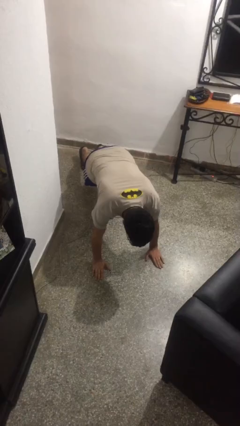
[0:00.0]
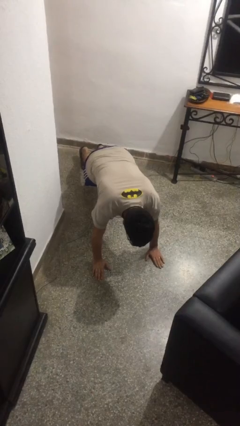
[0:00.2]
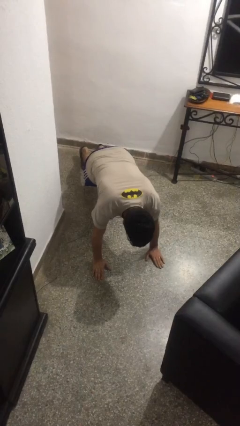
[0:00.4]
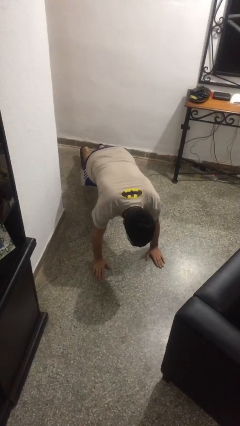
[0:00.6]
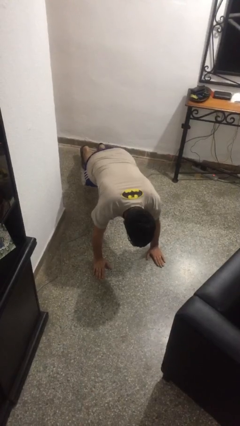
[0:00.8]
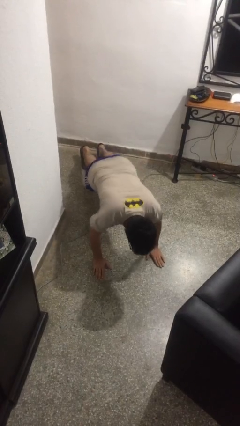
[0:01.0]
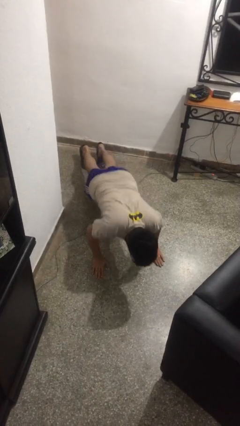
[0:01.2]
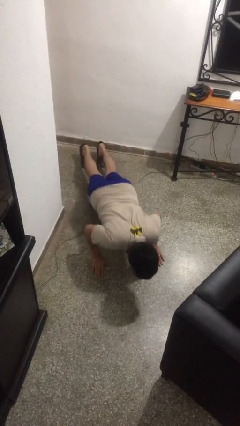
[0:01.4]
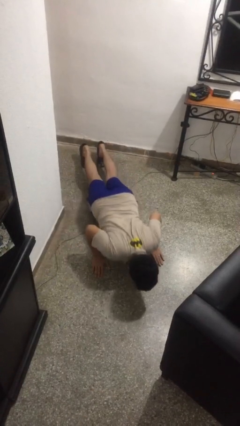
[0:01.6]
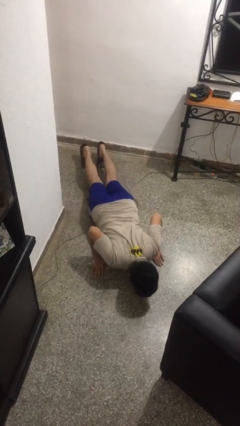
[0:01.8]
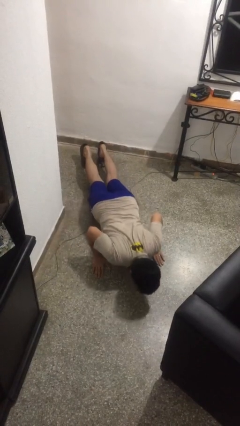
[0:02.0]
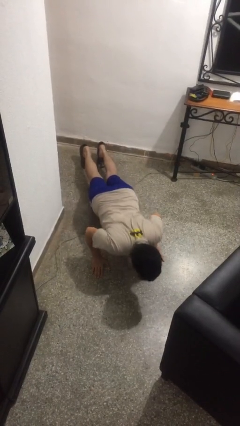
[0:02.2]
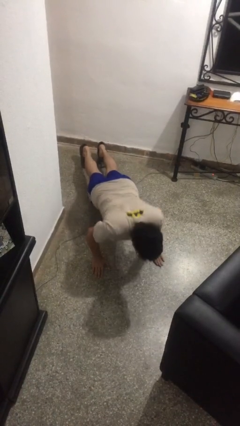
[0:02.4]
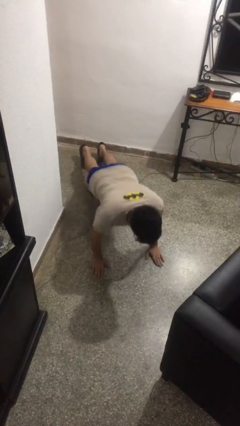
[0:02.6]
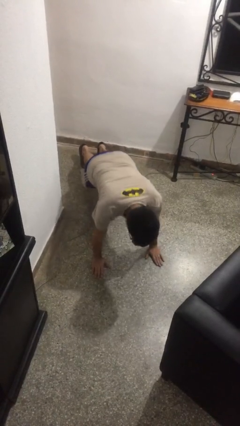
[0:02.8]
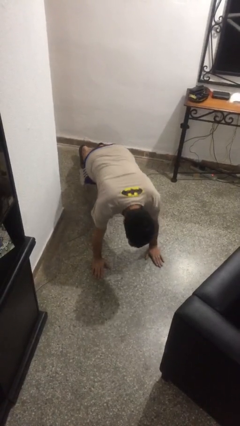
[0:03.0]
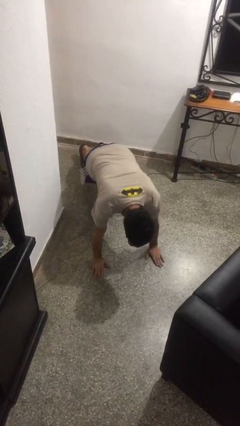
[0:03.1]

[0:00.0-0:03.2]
person exercises with pushup

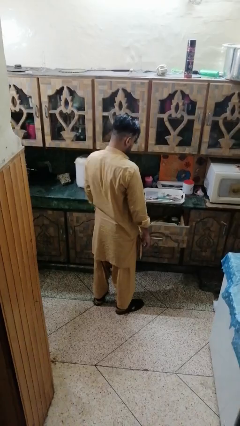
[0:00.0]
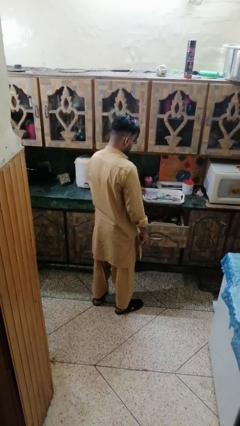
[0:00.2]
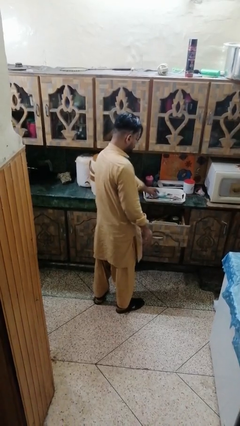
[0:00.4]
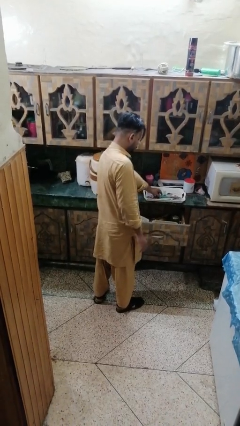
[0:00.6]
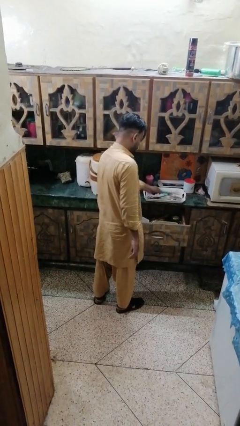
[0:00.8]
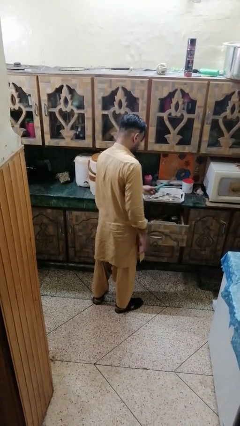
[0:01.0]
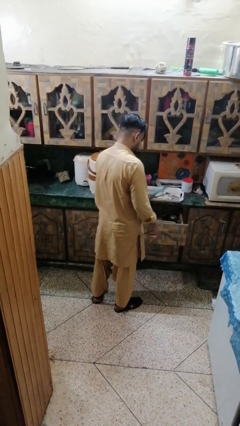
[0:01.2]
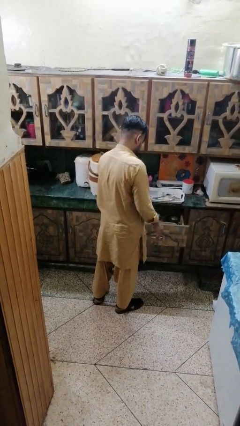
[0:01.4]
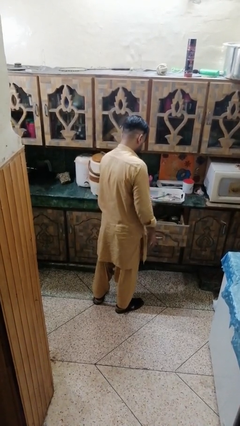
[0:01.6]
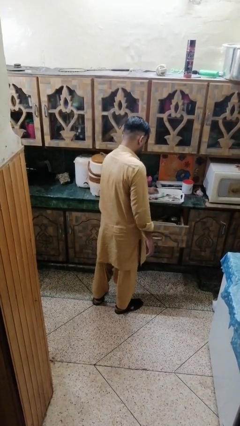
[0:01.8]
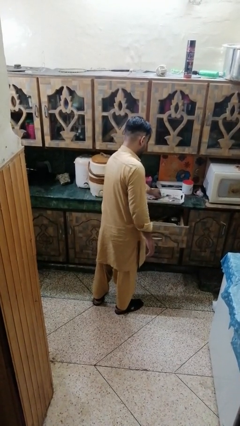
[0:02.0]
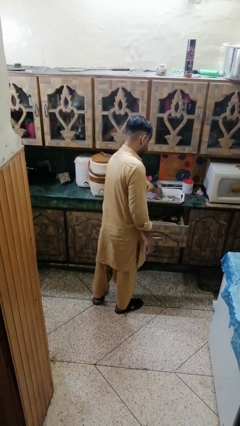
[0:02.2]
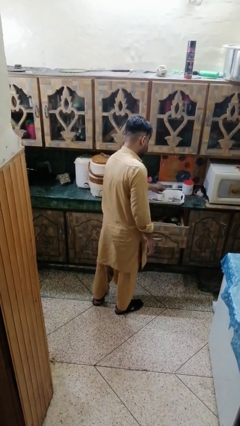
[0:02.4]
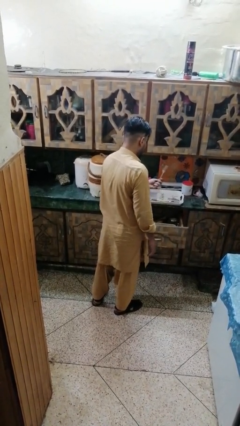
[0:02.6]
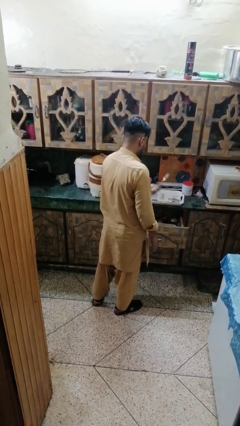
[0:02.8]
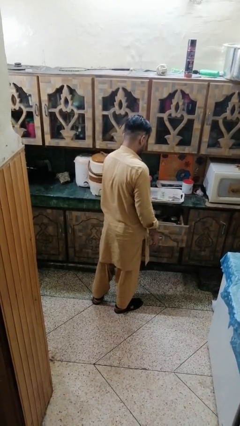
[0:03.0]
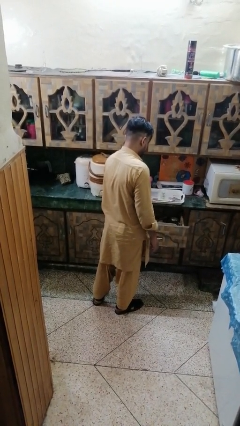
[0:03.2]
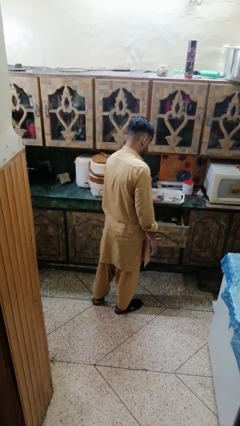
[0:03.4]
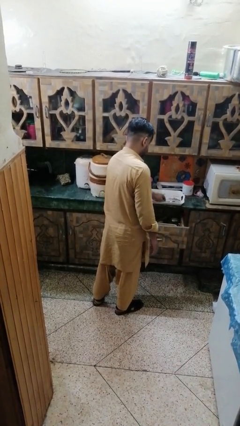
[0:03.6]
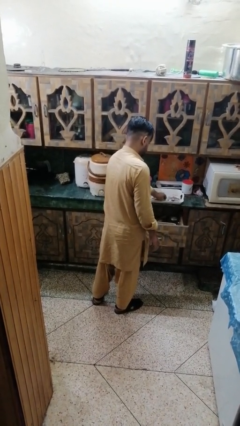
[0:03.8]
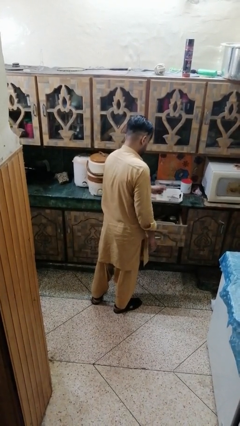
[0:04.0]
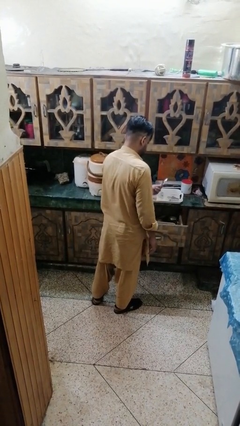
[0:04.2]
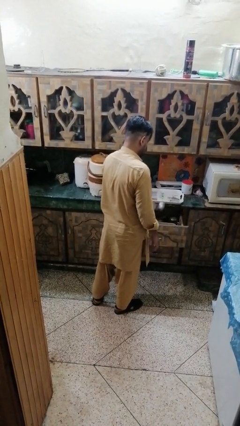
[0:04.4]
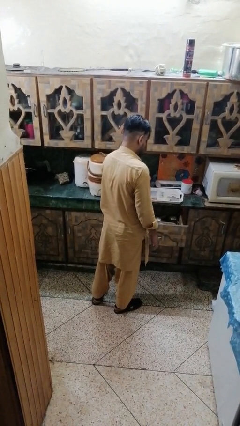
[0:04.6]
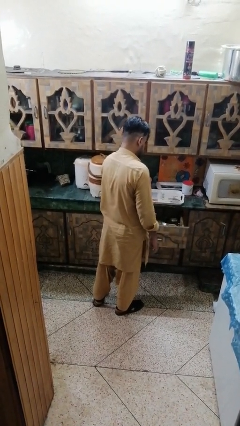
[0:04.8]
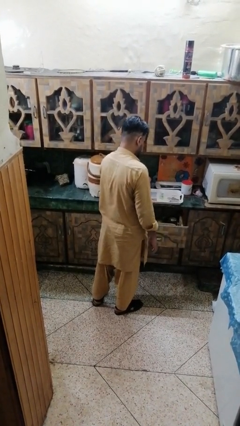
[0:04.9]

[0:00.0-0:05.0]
person puts object into kitchen drawer

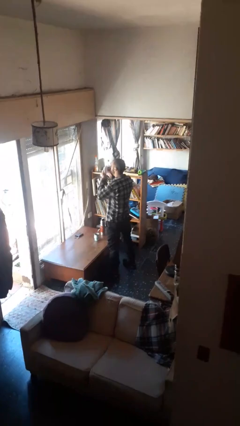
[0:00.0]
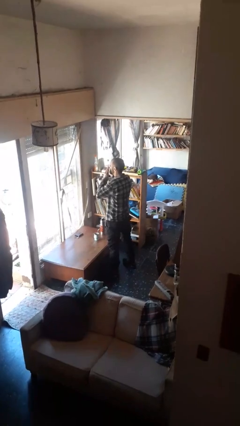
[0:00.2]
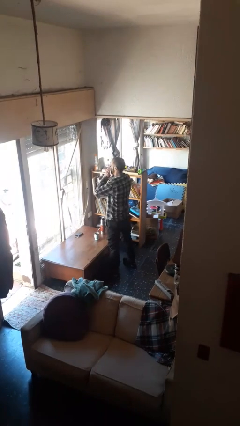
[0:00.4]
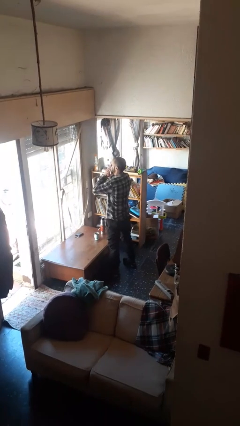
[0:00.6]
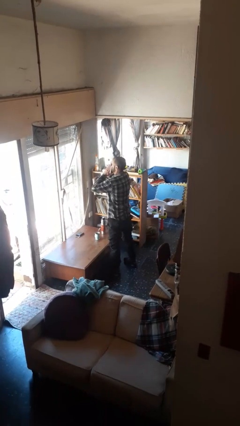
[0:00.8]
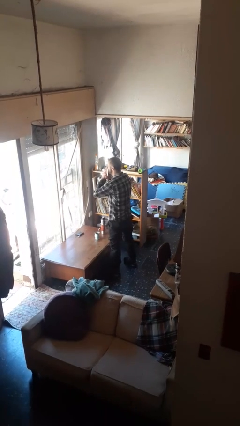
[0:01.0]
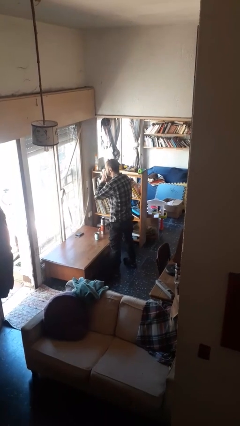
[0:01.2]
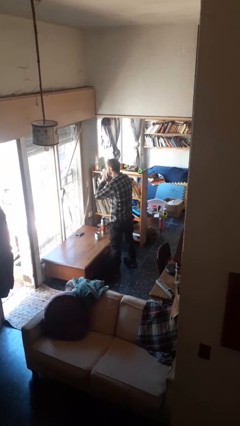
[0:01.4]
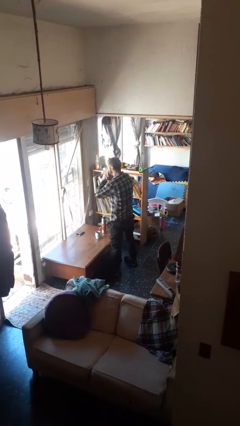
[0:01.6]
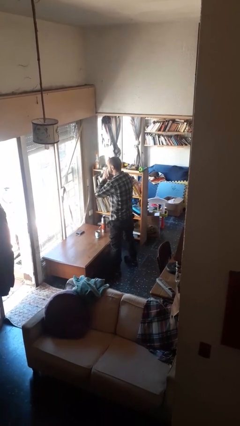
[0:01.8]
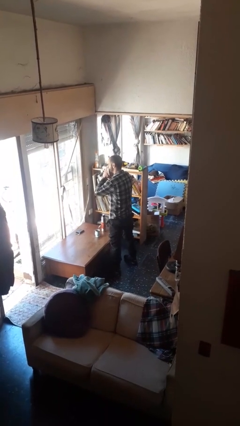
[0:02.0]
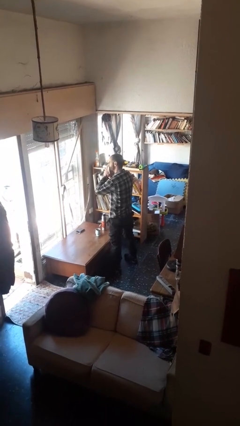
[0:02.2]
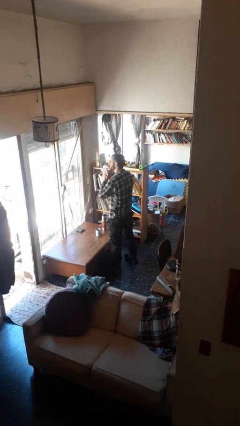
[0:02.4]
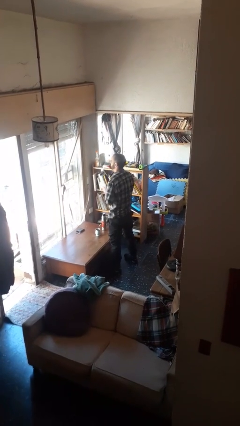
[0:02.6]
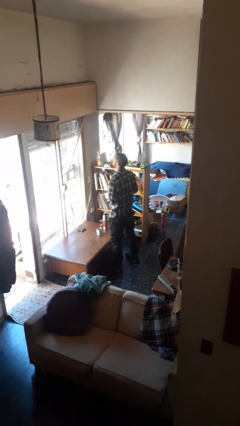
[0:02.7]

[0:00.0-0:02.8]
person blows nose

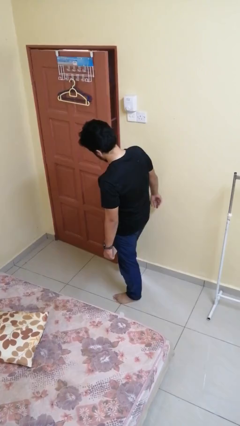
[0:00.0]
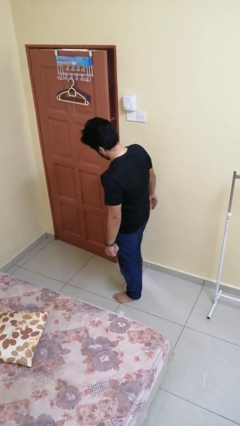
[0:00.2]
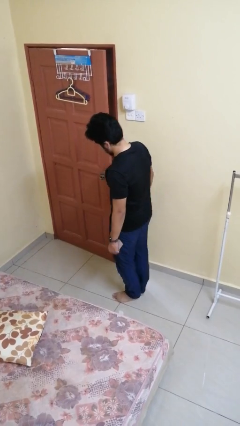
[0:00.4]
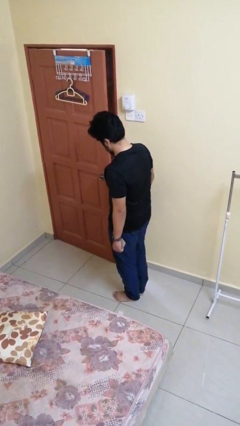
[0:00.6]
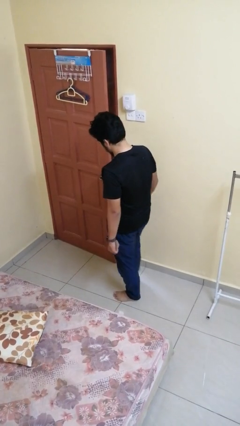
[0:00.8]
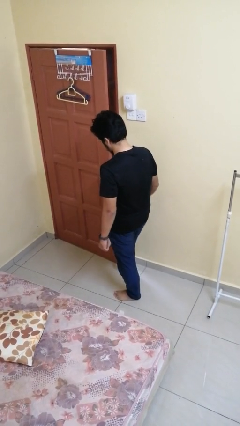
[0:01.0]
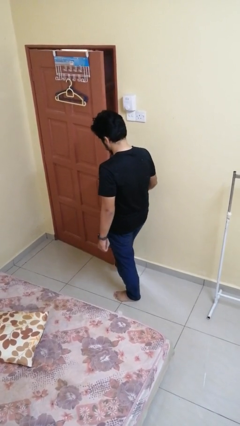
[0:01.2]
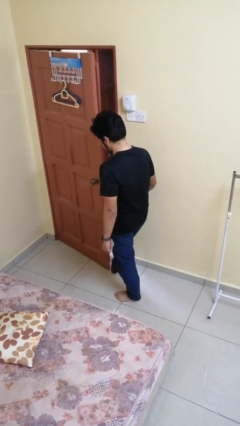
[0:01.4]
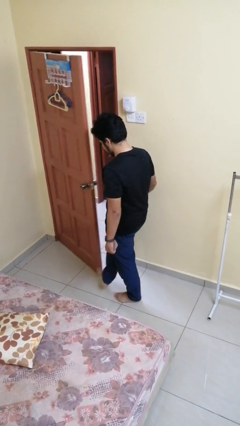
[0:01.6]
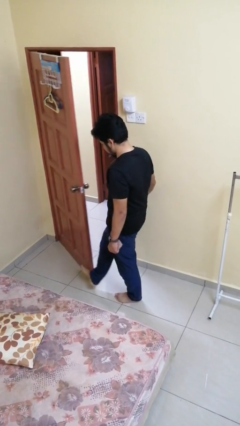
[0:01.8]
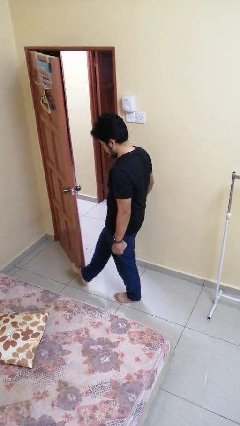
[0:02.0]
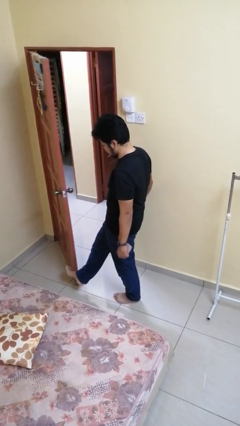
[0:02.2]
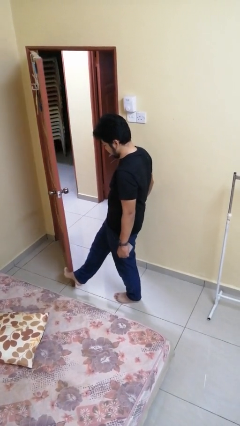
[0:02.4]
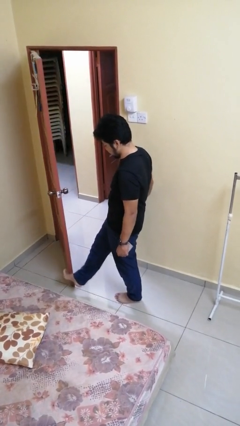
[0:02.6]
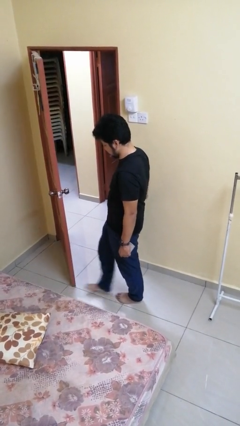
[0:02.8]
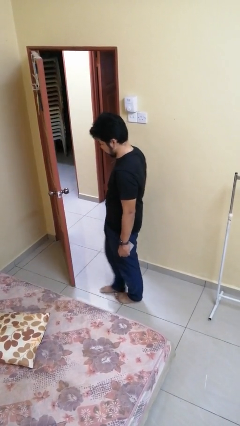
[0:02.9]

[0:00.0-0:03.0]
person opens facility door

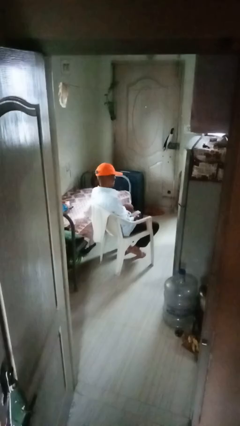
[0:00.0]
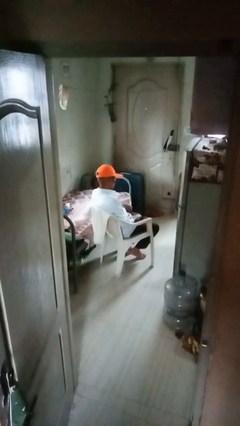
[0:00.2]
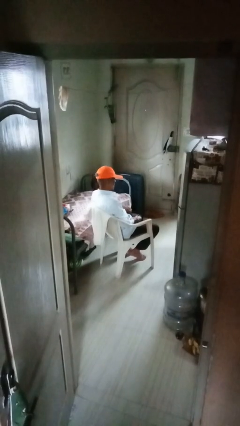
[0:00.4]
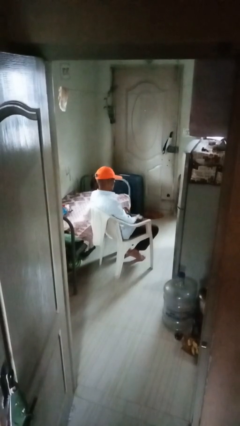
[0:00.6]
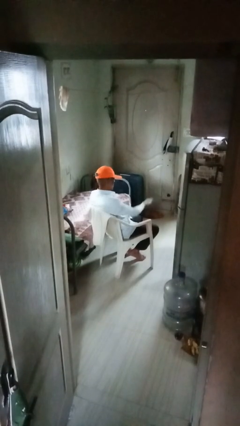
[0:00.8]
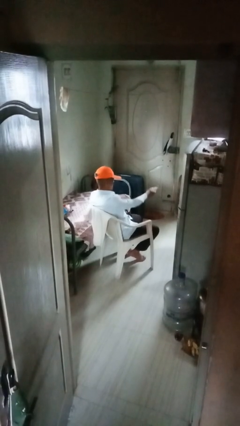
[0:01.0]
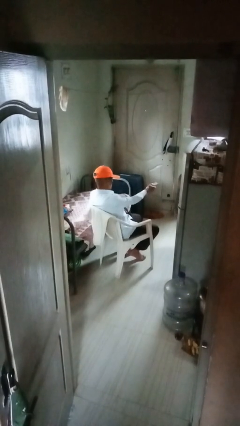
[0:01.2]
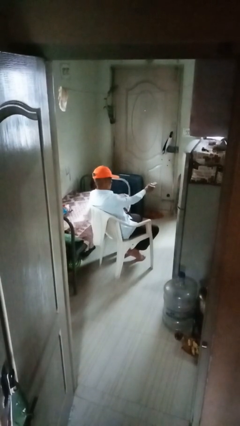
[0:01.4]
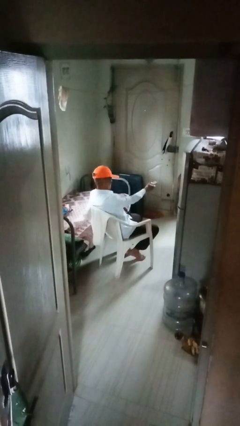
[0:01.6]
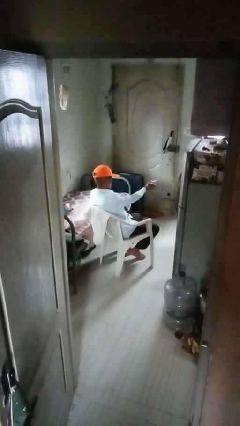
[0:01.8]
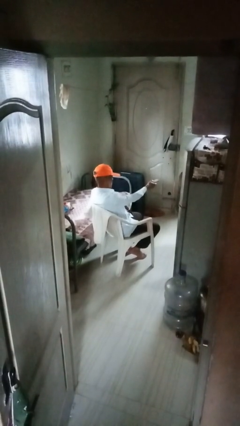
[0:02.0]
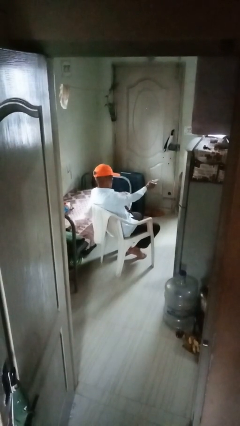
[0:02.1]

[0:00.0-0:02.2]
person uses television remote

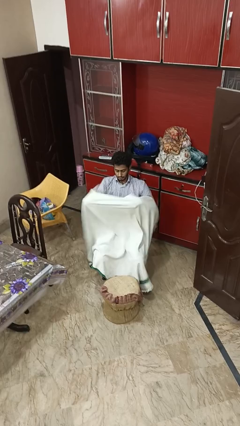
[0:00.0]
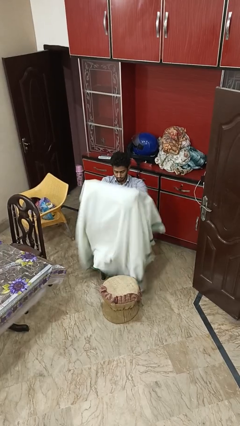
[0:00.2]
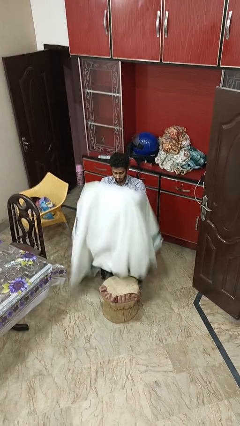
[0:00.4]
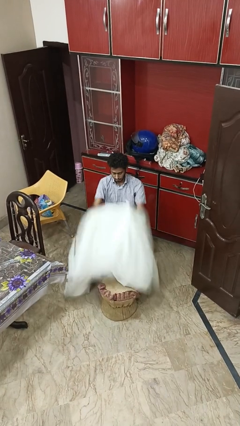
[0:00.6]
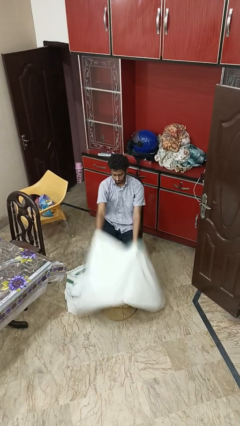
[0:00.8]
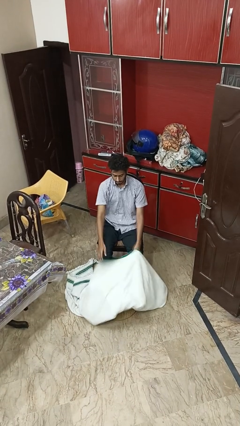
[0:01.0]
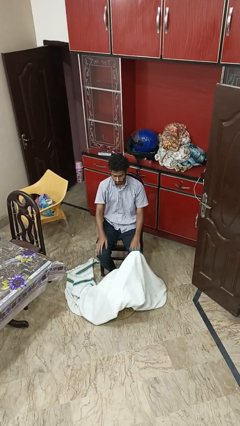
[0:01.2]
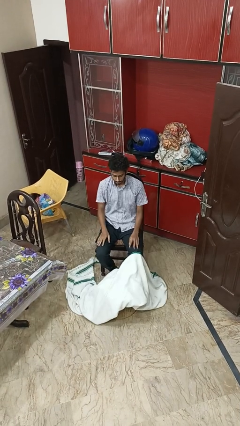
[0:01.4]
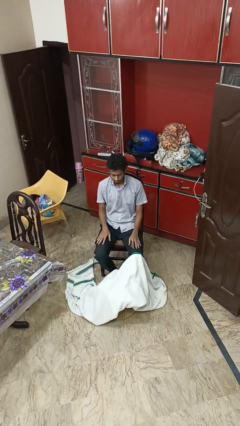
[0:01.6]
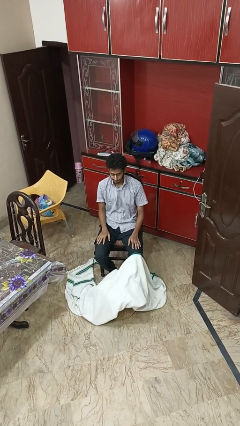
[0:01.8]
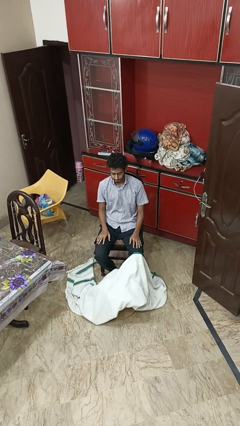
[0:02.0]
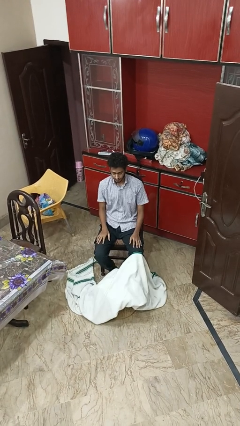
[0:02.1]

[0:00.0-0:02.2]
person uncovers with blanket
